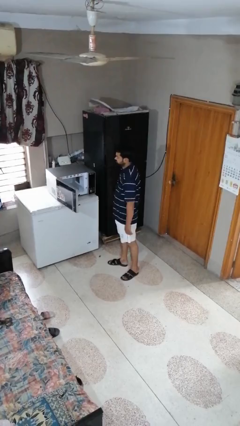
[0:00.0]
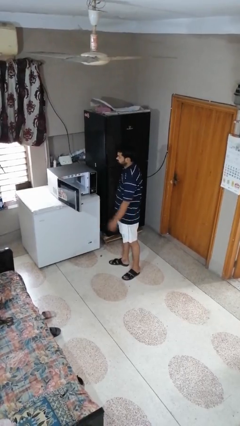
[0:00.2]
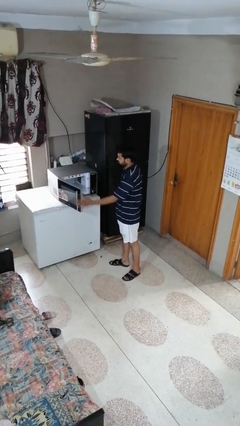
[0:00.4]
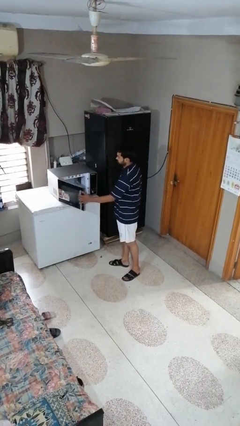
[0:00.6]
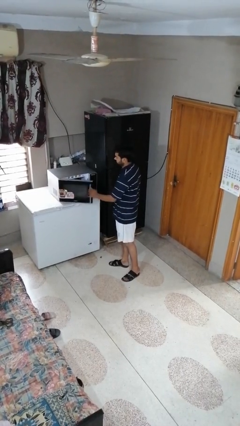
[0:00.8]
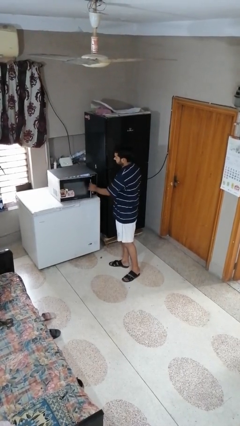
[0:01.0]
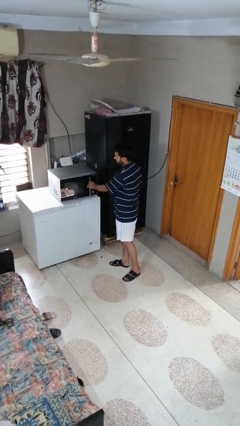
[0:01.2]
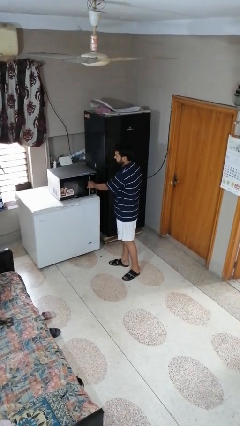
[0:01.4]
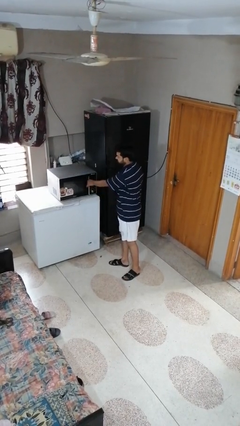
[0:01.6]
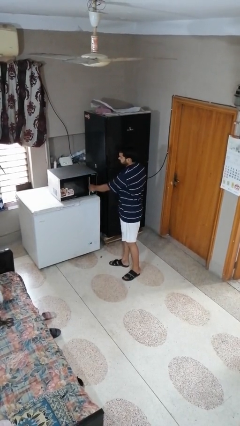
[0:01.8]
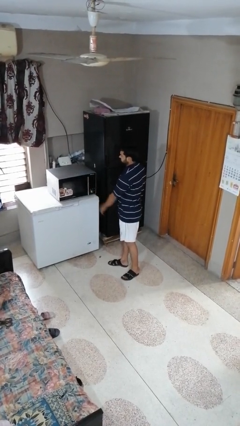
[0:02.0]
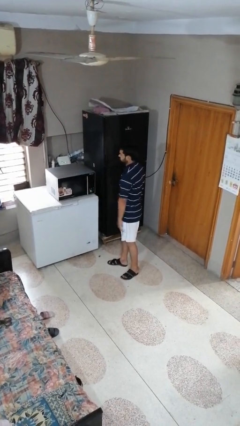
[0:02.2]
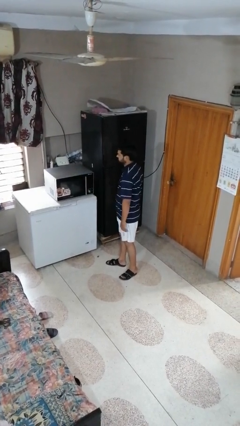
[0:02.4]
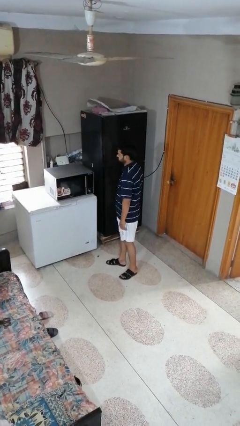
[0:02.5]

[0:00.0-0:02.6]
person closes microwave

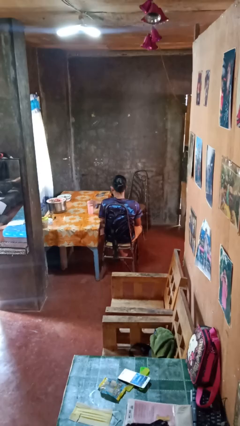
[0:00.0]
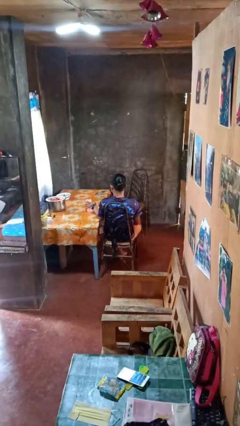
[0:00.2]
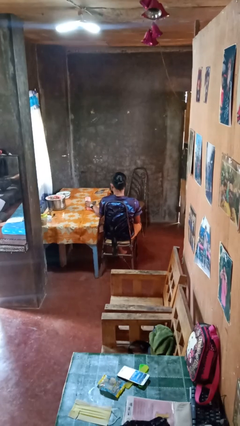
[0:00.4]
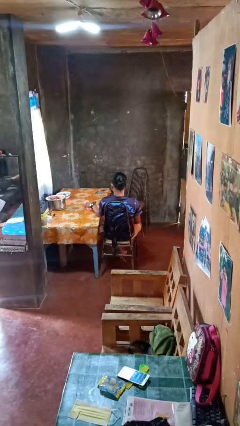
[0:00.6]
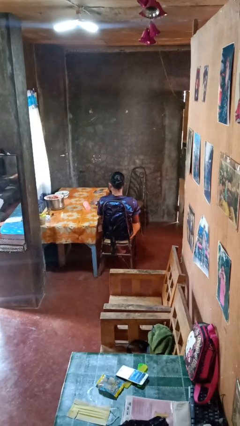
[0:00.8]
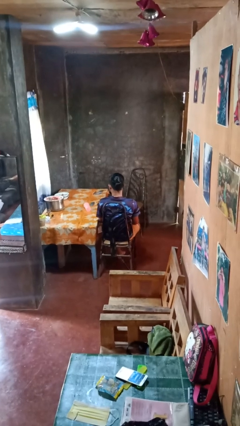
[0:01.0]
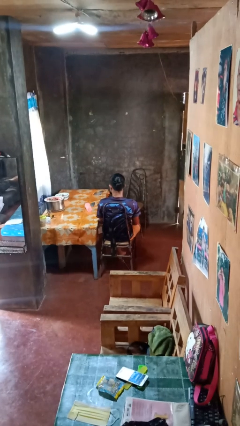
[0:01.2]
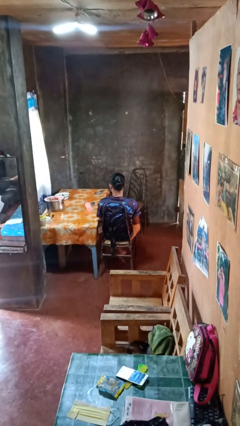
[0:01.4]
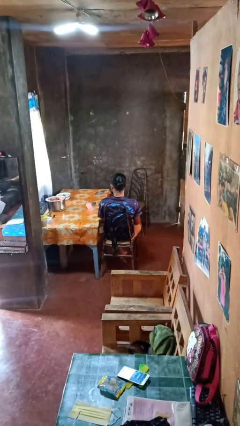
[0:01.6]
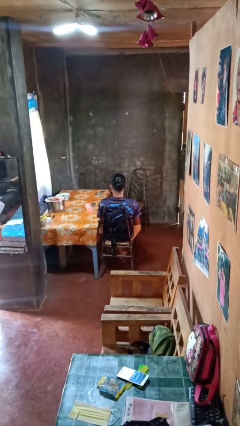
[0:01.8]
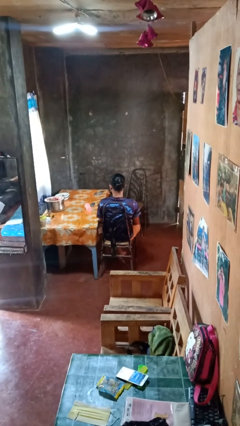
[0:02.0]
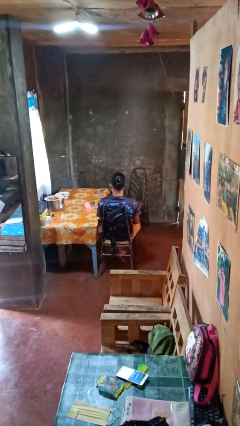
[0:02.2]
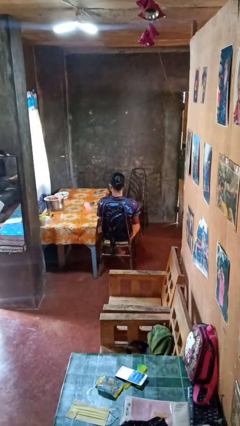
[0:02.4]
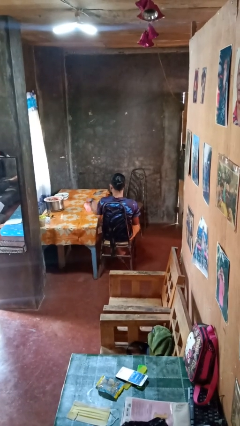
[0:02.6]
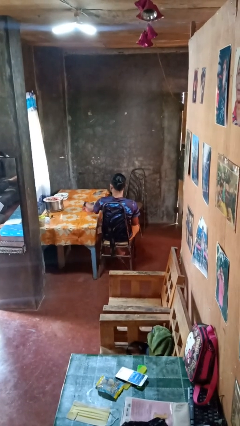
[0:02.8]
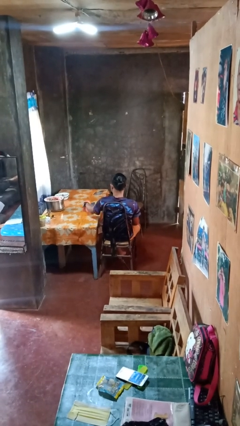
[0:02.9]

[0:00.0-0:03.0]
person knocks over glass

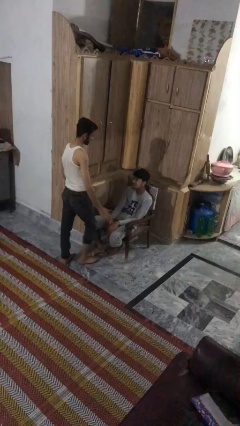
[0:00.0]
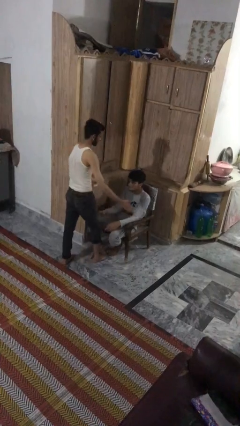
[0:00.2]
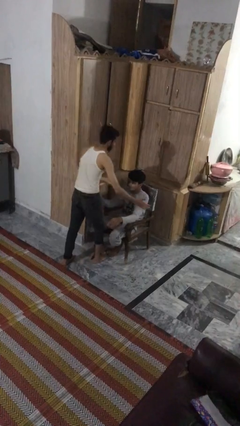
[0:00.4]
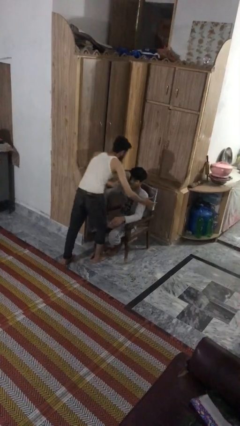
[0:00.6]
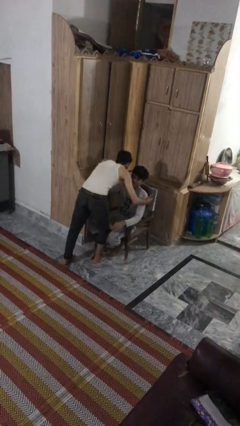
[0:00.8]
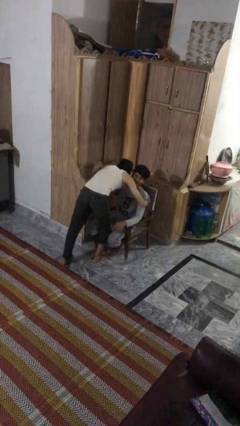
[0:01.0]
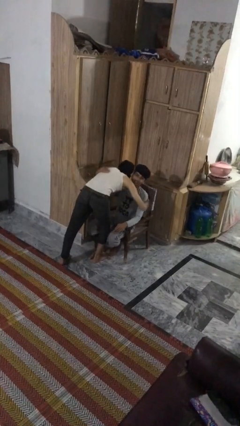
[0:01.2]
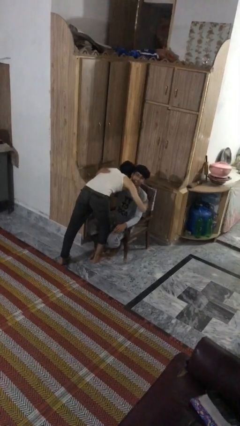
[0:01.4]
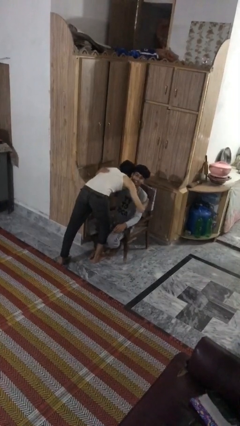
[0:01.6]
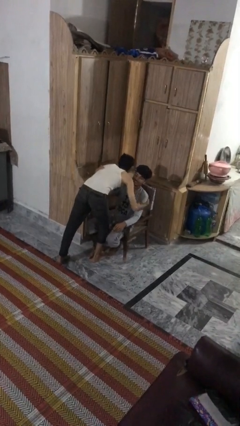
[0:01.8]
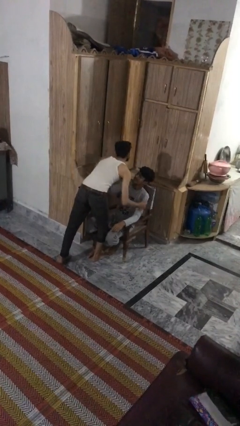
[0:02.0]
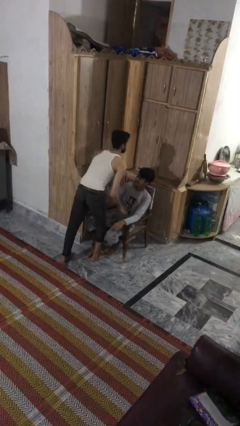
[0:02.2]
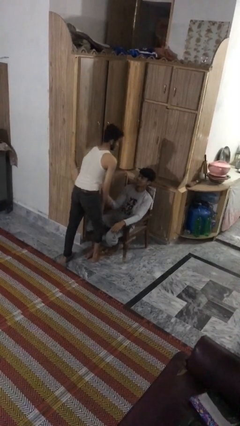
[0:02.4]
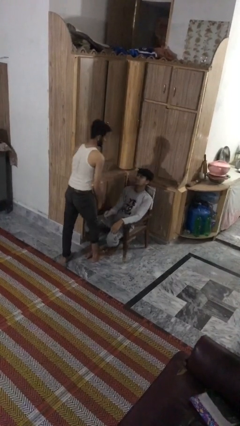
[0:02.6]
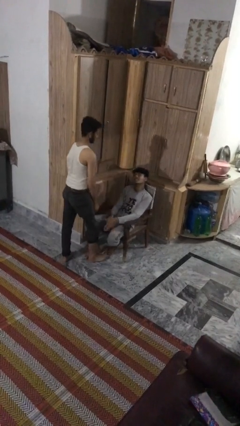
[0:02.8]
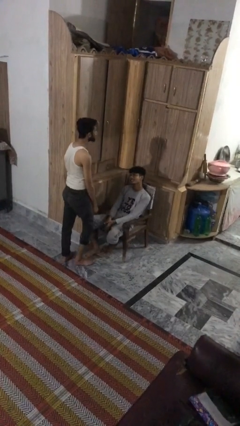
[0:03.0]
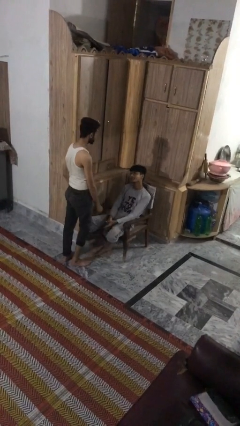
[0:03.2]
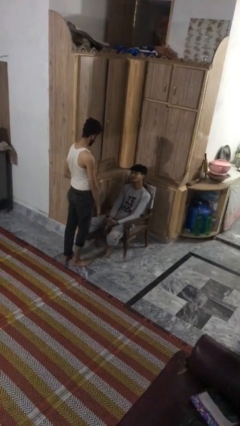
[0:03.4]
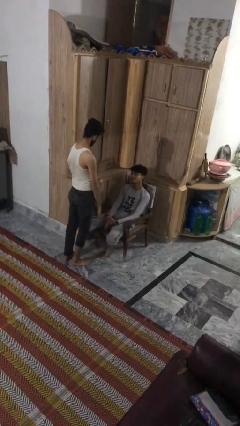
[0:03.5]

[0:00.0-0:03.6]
person embraces person

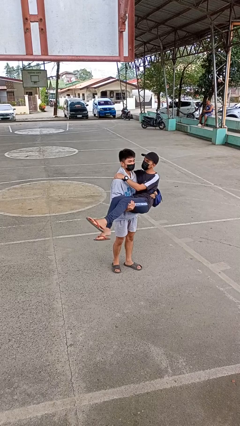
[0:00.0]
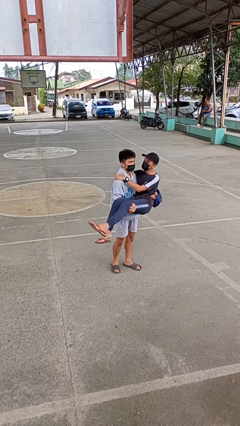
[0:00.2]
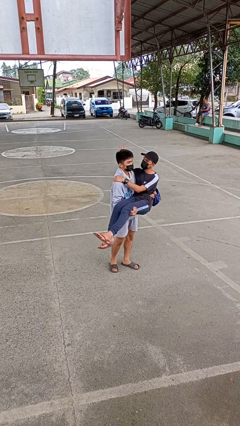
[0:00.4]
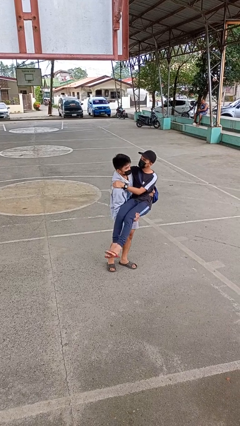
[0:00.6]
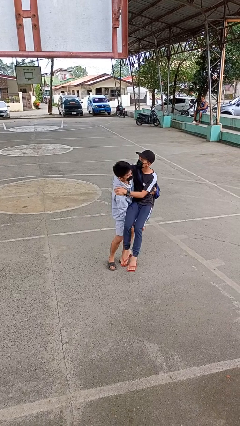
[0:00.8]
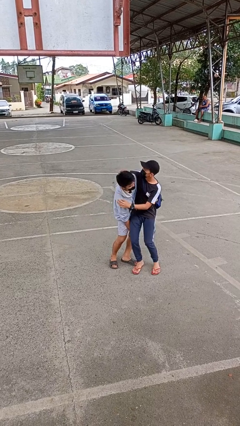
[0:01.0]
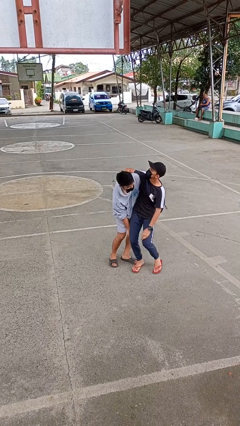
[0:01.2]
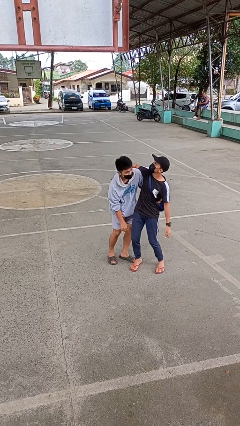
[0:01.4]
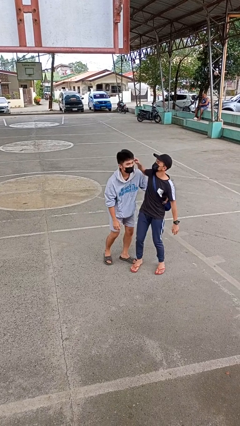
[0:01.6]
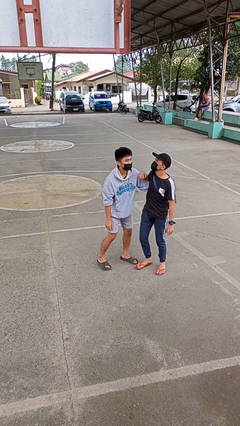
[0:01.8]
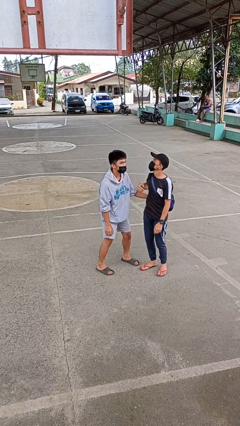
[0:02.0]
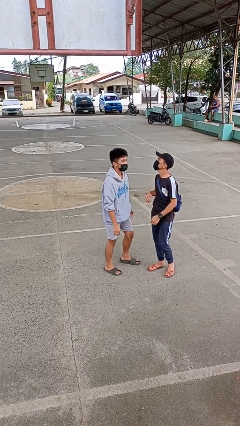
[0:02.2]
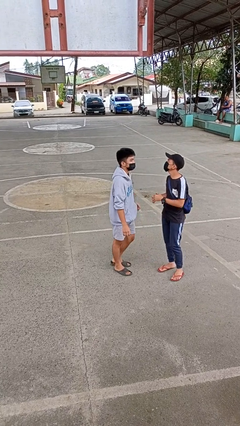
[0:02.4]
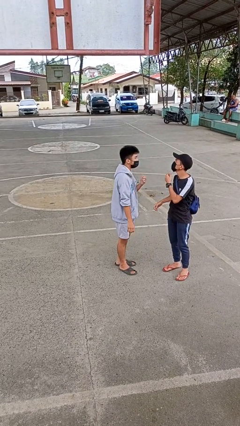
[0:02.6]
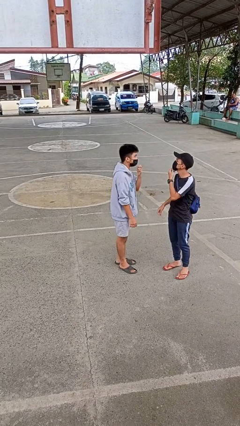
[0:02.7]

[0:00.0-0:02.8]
person puts down person

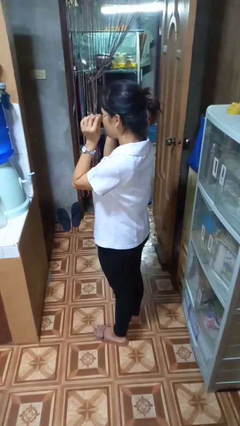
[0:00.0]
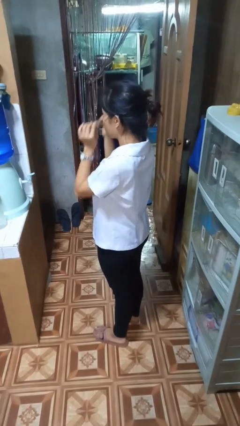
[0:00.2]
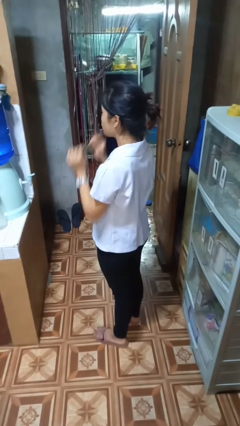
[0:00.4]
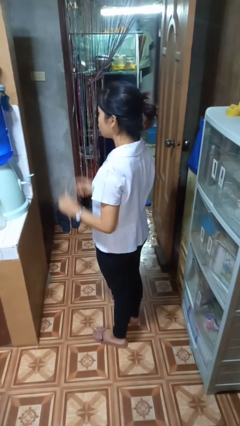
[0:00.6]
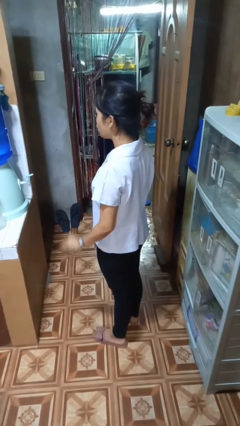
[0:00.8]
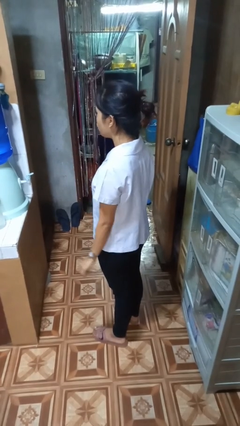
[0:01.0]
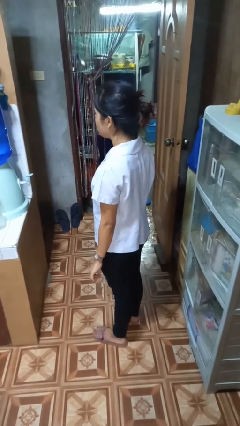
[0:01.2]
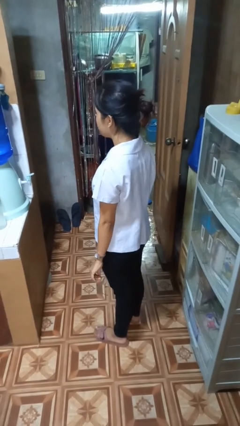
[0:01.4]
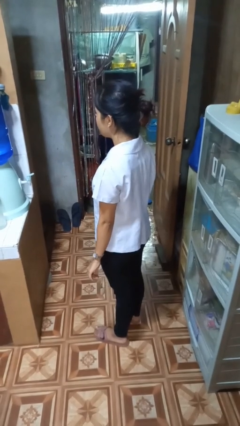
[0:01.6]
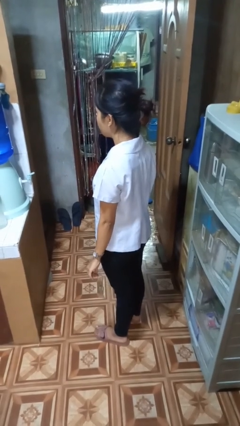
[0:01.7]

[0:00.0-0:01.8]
person takes off glasses

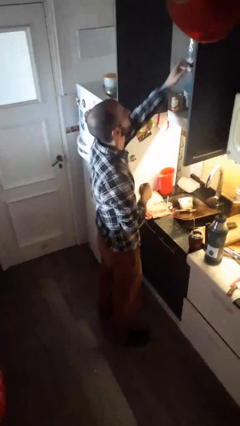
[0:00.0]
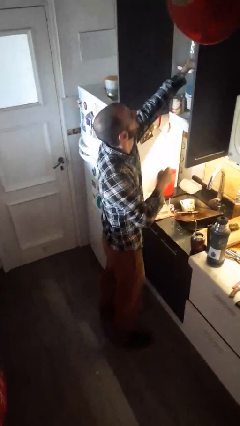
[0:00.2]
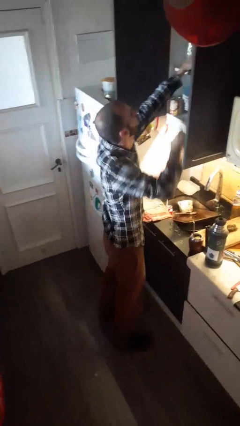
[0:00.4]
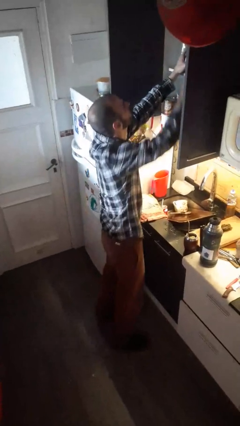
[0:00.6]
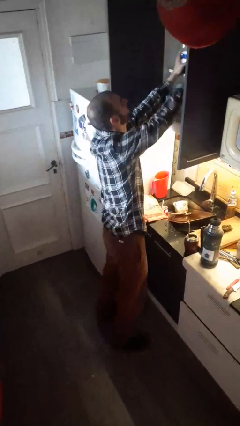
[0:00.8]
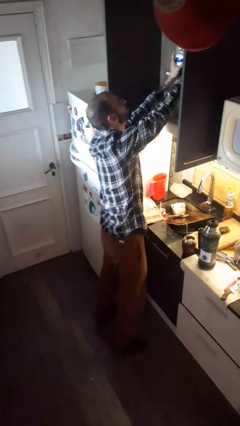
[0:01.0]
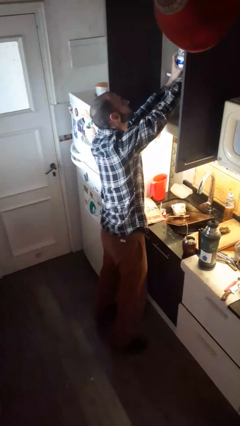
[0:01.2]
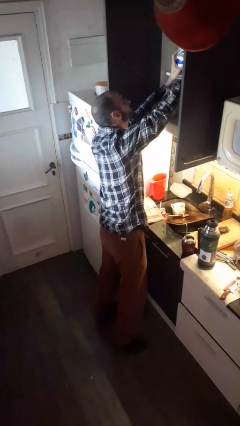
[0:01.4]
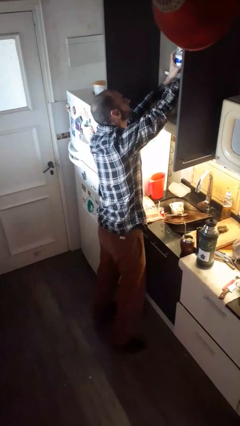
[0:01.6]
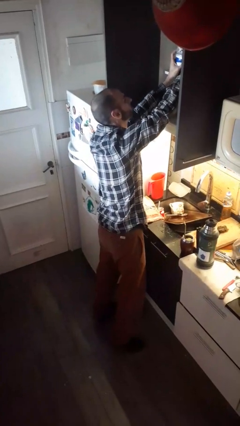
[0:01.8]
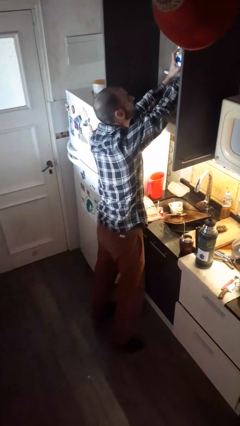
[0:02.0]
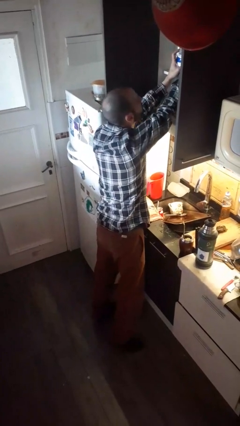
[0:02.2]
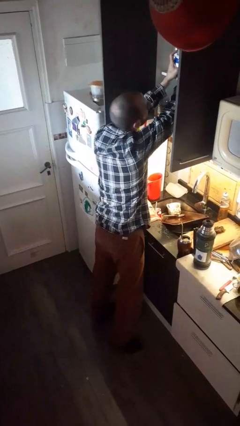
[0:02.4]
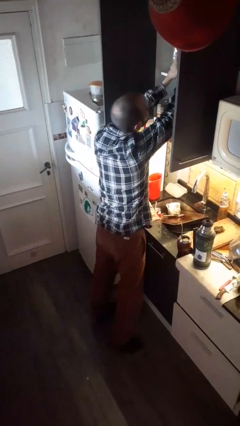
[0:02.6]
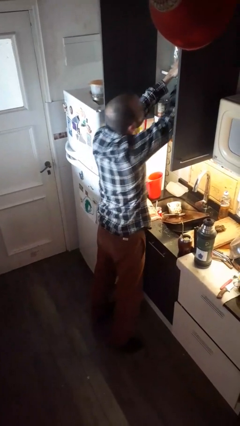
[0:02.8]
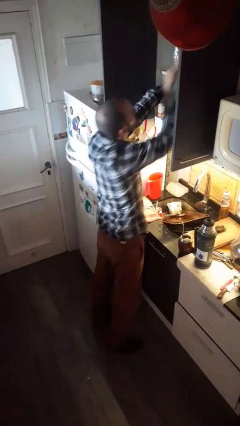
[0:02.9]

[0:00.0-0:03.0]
person searches in kitchen drawer

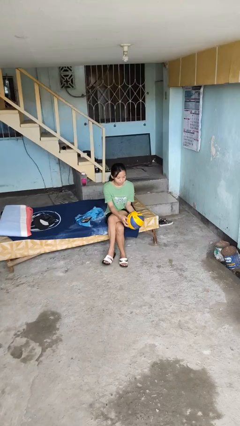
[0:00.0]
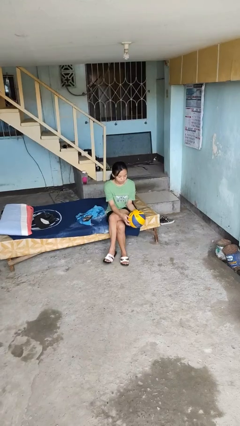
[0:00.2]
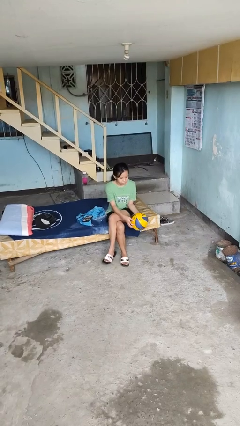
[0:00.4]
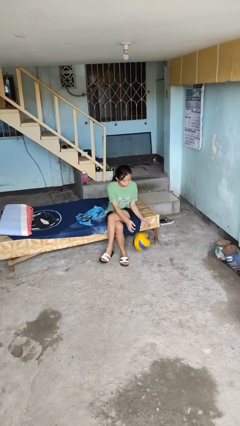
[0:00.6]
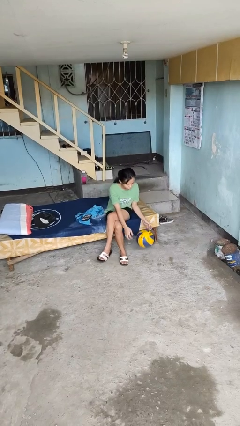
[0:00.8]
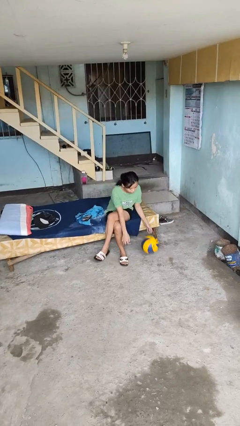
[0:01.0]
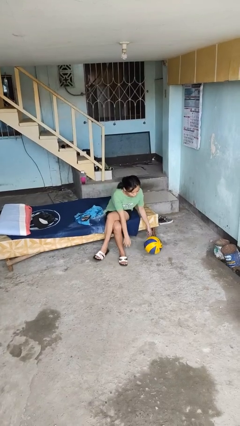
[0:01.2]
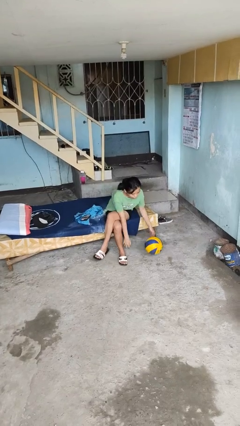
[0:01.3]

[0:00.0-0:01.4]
person drops object
